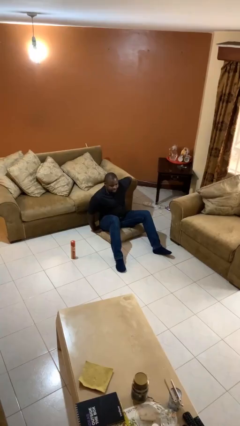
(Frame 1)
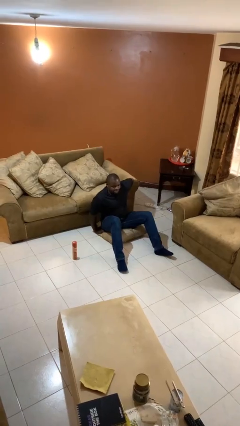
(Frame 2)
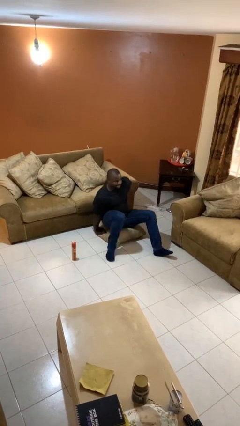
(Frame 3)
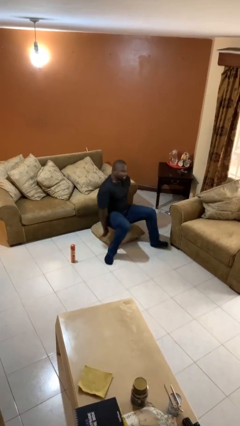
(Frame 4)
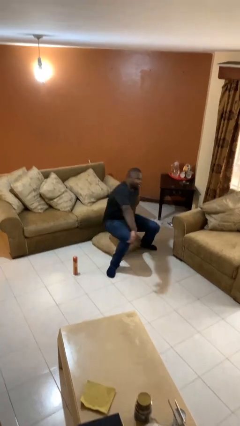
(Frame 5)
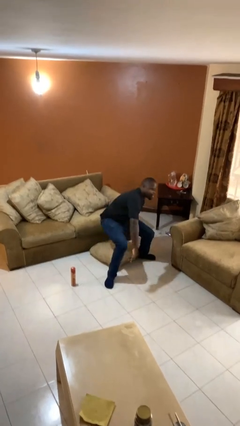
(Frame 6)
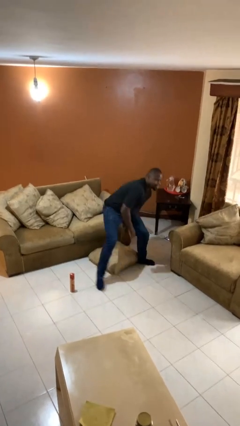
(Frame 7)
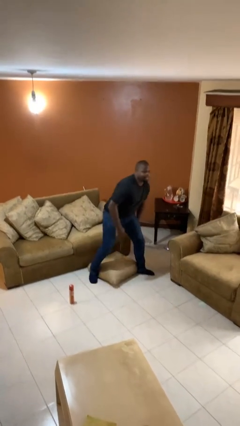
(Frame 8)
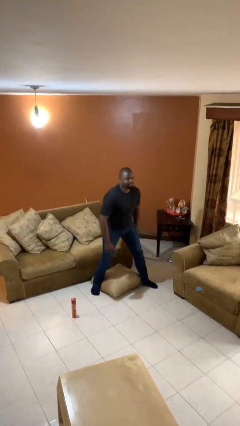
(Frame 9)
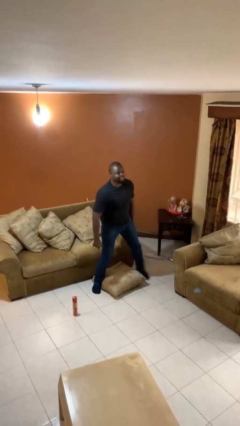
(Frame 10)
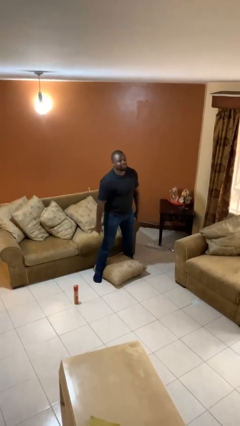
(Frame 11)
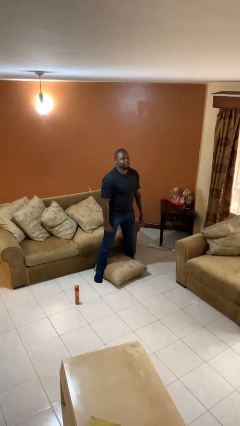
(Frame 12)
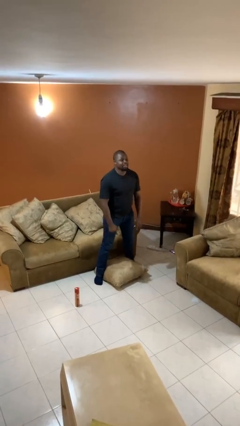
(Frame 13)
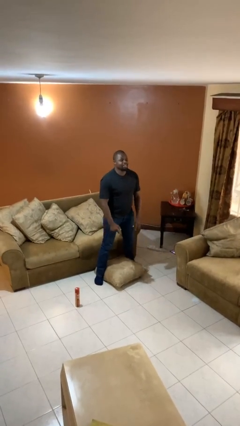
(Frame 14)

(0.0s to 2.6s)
person stands up from floor

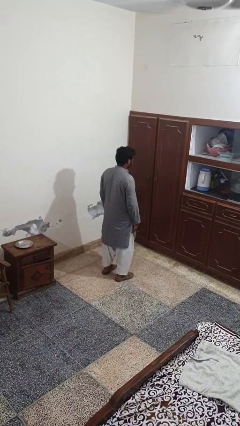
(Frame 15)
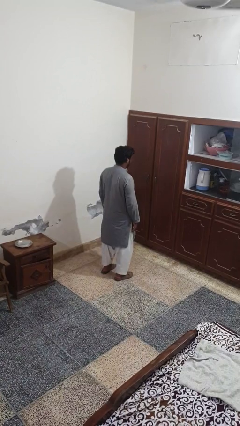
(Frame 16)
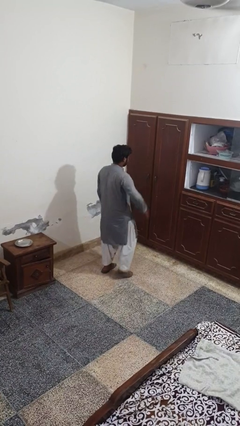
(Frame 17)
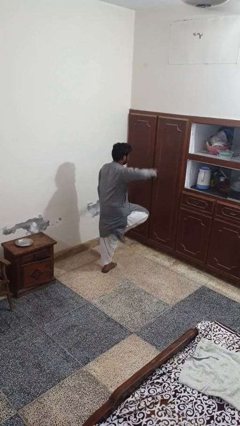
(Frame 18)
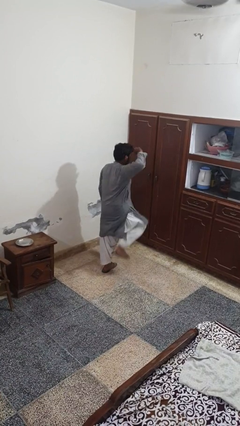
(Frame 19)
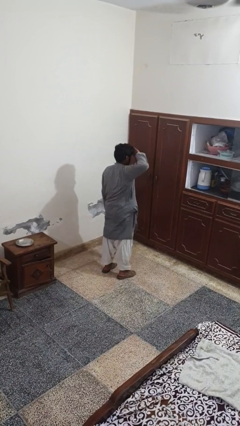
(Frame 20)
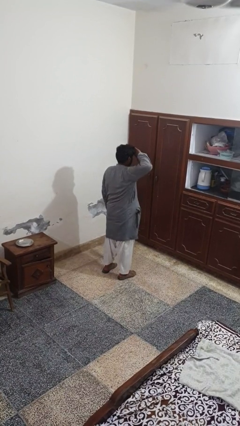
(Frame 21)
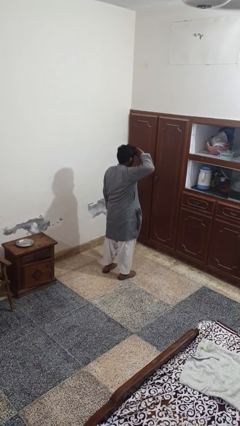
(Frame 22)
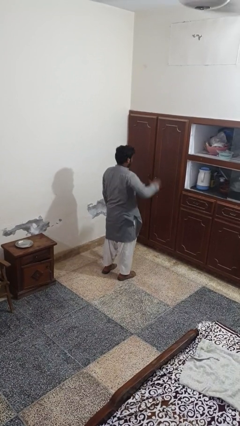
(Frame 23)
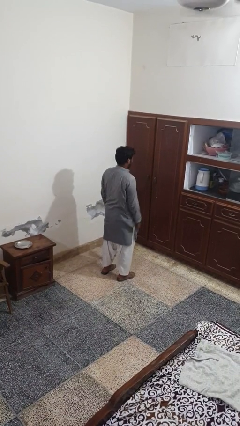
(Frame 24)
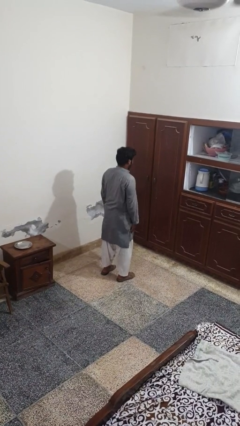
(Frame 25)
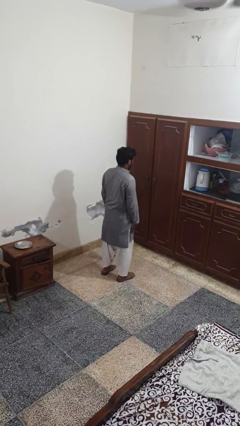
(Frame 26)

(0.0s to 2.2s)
person salutes

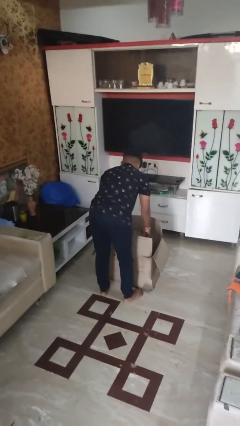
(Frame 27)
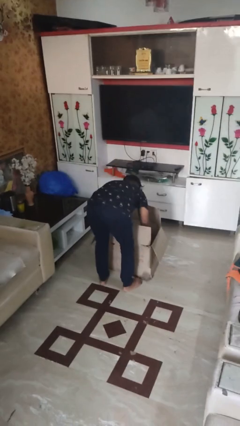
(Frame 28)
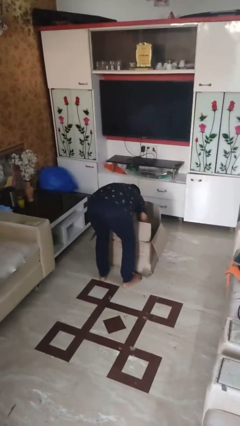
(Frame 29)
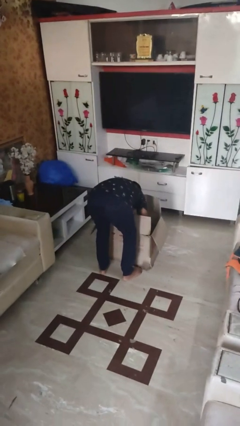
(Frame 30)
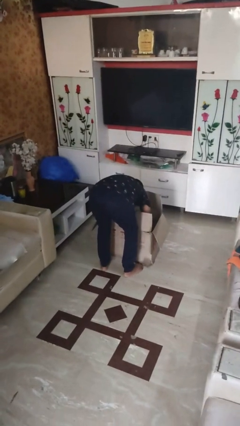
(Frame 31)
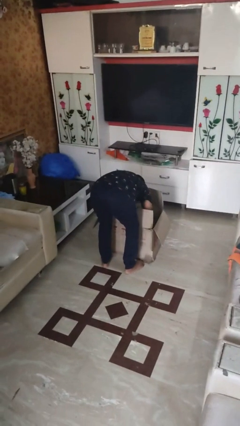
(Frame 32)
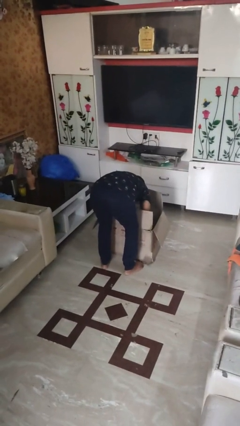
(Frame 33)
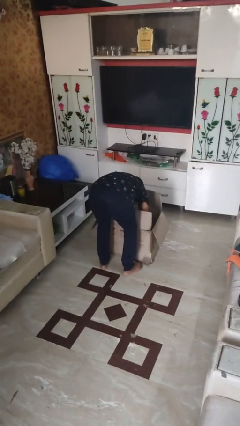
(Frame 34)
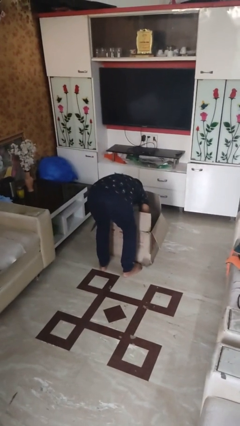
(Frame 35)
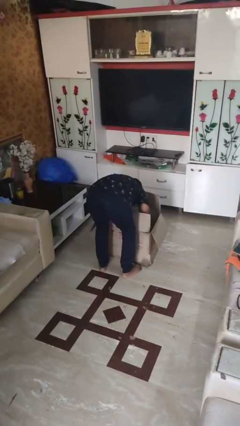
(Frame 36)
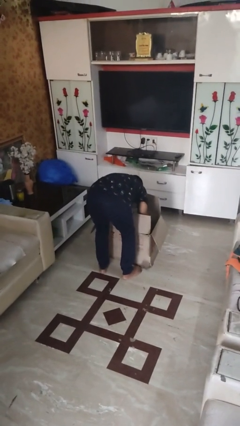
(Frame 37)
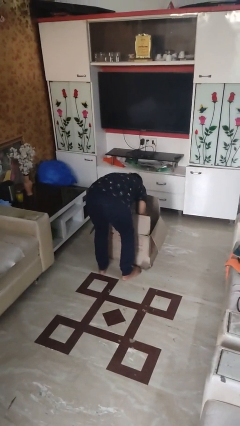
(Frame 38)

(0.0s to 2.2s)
person searches in box

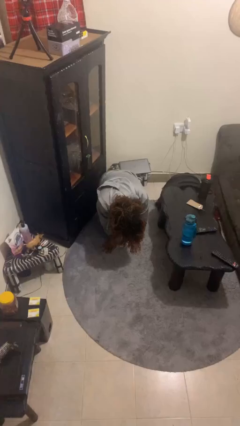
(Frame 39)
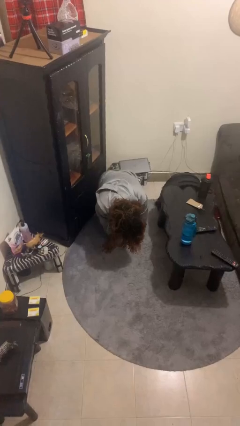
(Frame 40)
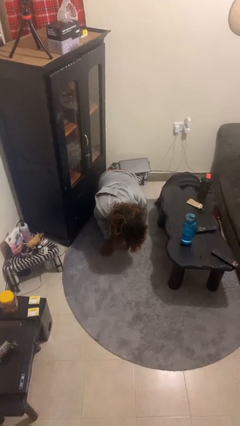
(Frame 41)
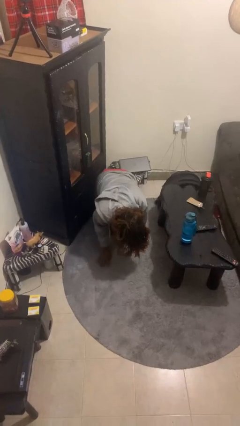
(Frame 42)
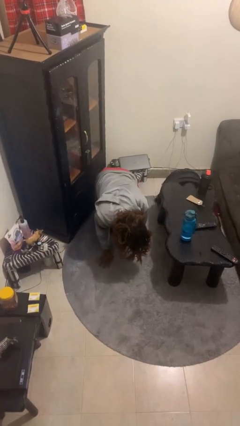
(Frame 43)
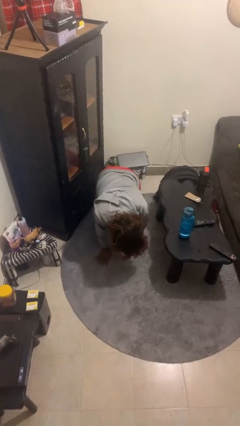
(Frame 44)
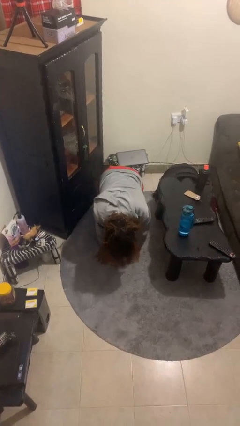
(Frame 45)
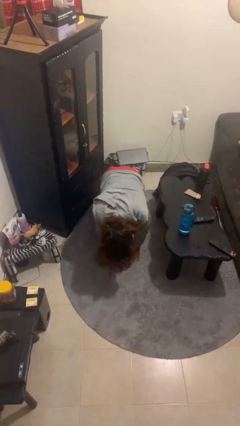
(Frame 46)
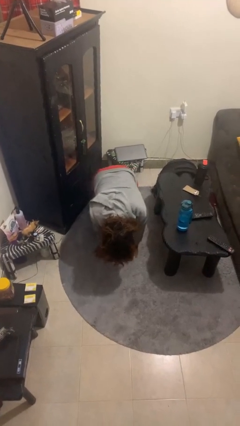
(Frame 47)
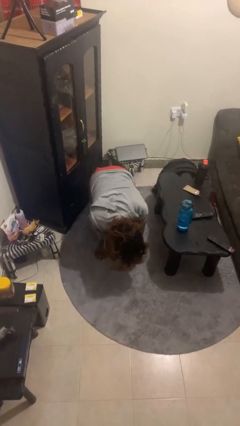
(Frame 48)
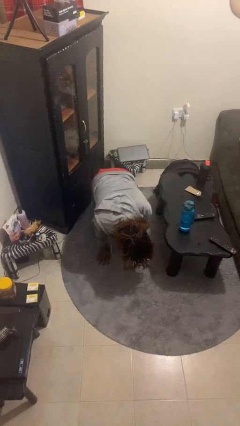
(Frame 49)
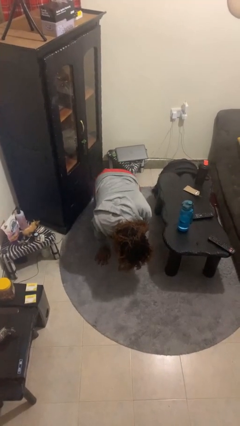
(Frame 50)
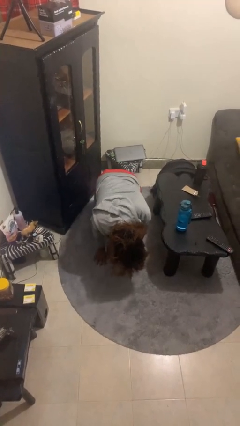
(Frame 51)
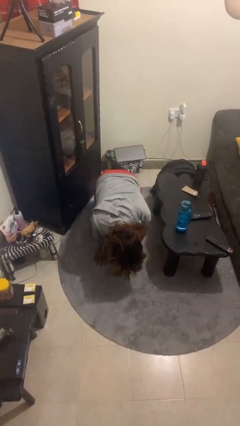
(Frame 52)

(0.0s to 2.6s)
person crawls

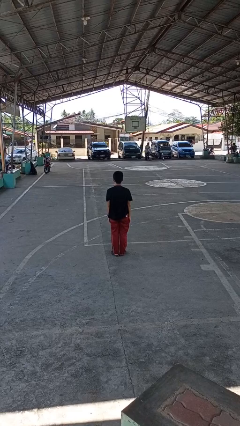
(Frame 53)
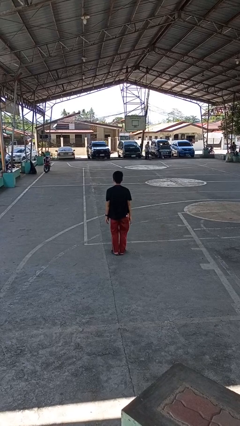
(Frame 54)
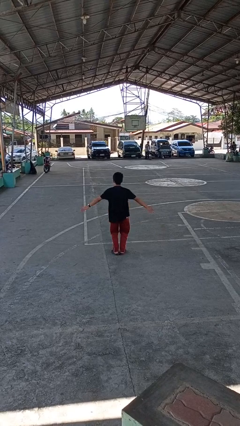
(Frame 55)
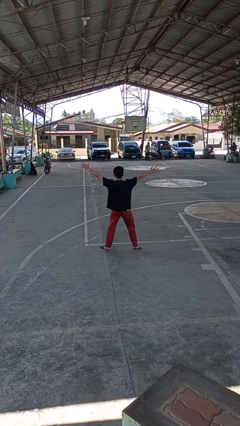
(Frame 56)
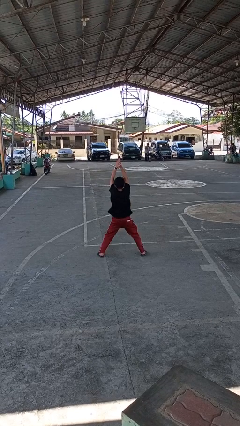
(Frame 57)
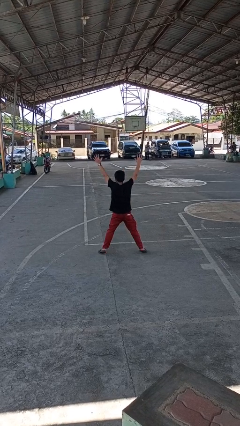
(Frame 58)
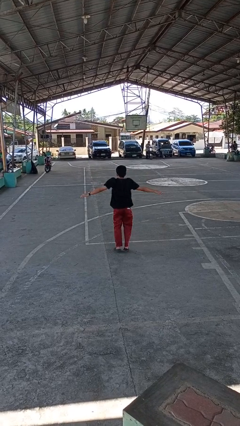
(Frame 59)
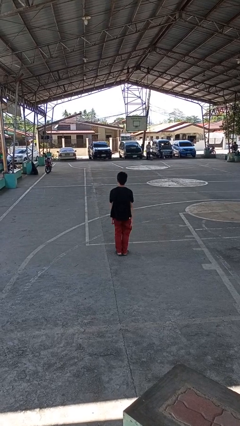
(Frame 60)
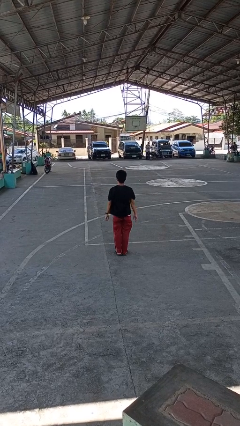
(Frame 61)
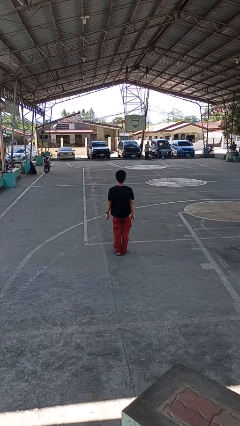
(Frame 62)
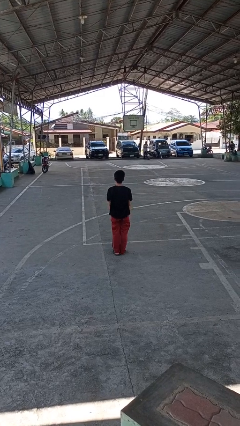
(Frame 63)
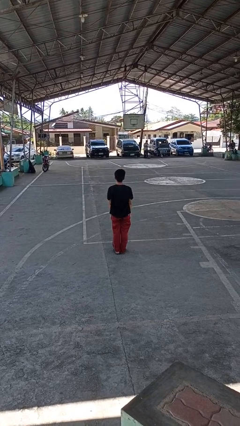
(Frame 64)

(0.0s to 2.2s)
person exercises with jumping jacks

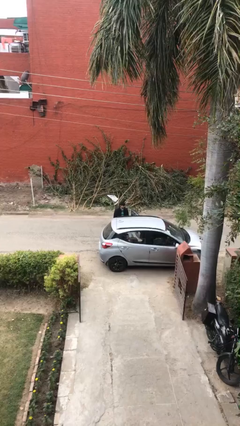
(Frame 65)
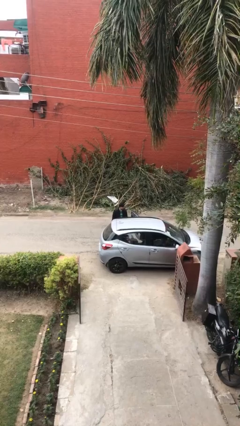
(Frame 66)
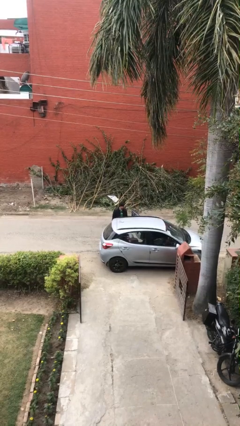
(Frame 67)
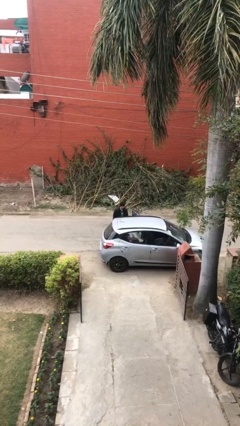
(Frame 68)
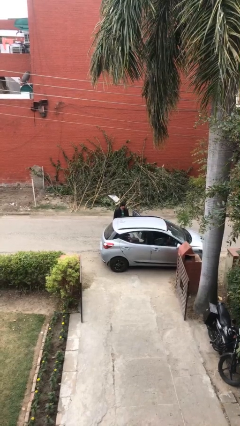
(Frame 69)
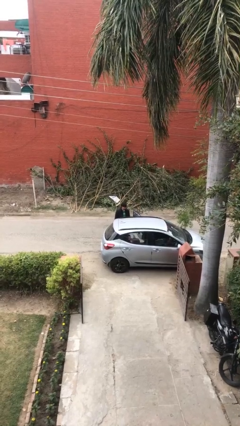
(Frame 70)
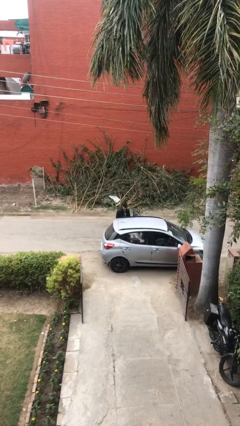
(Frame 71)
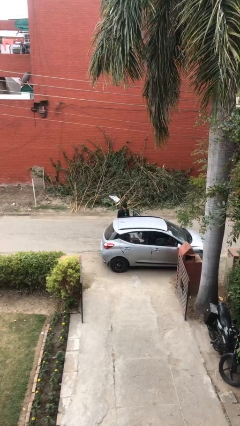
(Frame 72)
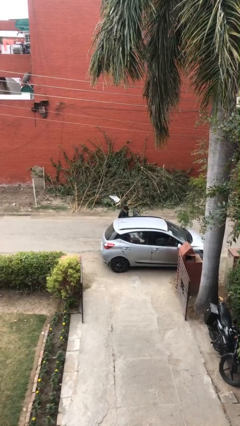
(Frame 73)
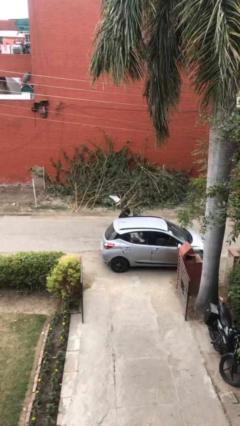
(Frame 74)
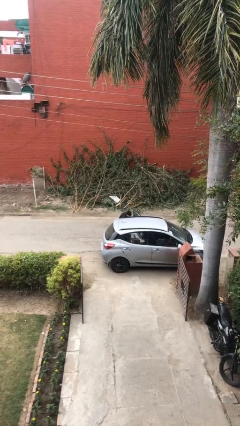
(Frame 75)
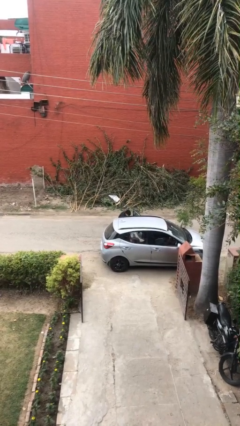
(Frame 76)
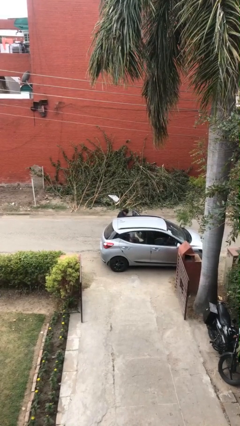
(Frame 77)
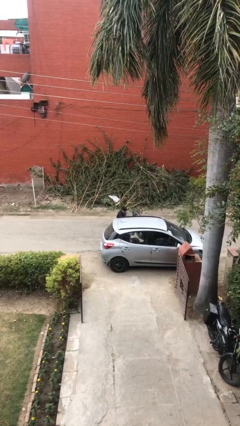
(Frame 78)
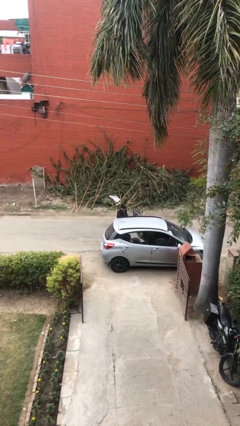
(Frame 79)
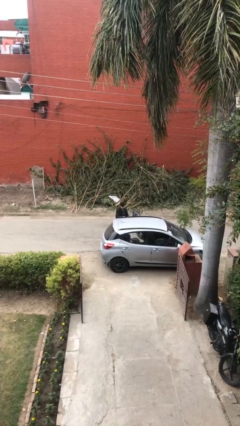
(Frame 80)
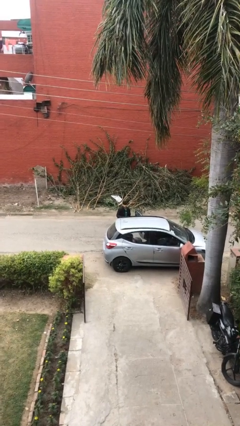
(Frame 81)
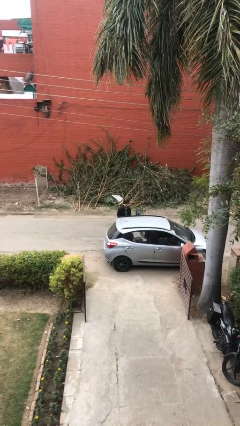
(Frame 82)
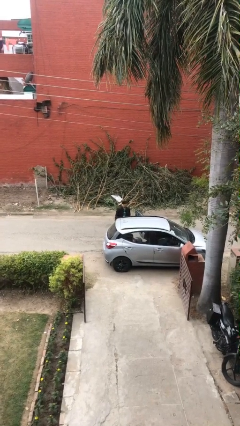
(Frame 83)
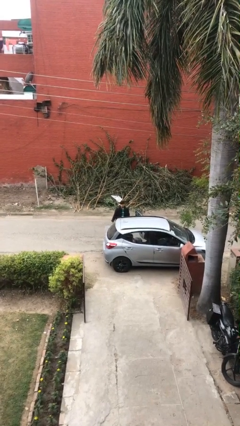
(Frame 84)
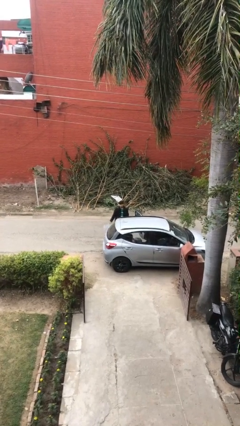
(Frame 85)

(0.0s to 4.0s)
person unloads car

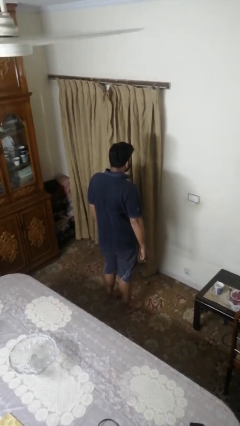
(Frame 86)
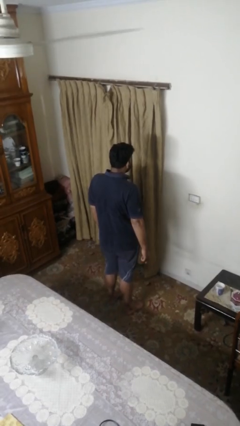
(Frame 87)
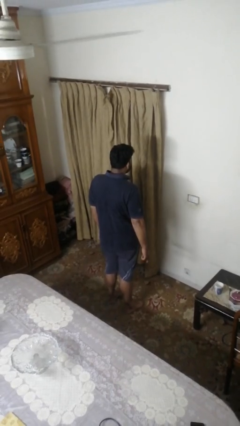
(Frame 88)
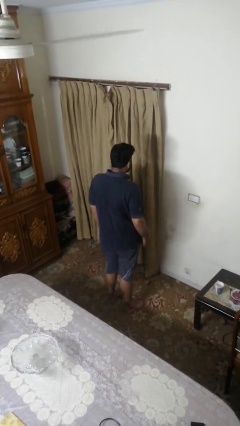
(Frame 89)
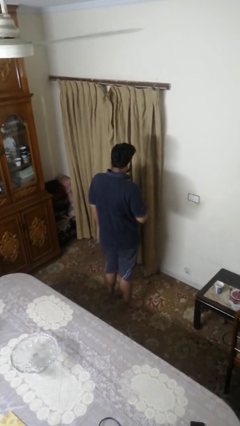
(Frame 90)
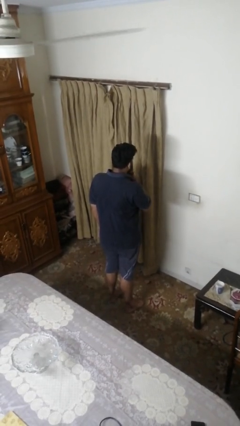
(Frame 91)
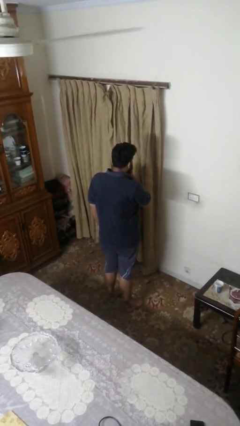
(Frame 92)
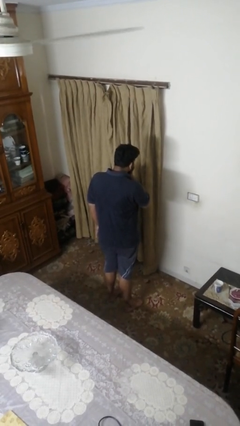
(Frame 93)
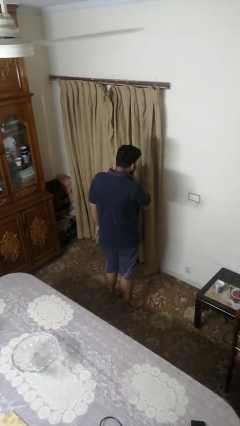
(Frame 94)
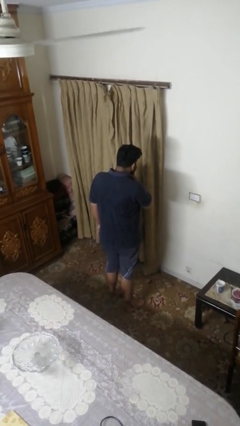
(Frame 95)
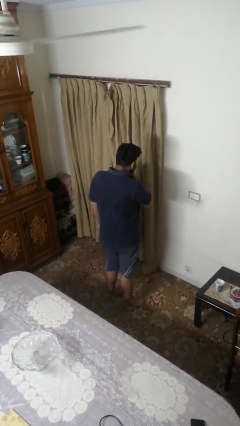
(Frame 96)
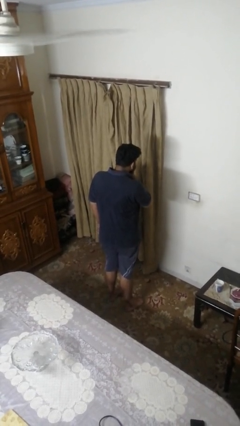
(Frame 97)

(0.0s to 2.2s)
person strokes chin
